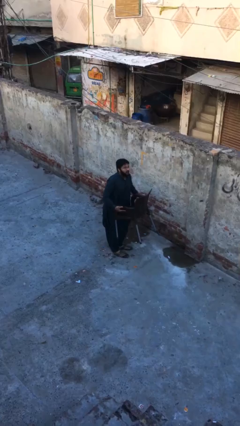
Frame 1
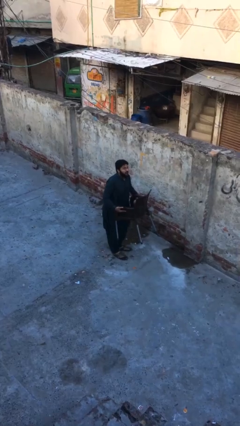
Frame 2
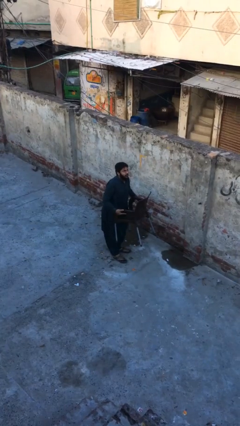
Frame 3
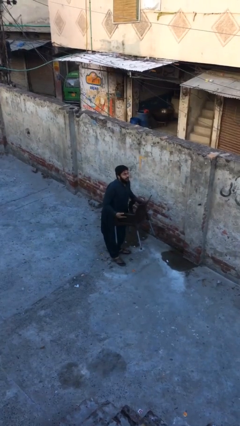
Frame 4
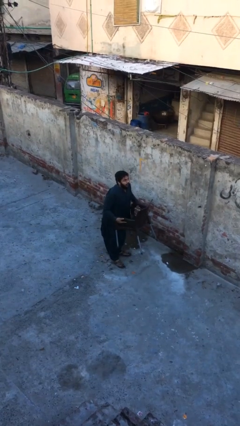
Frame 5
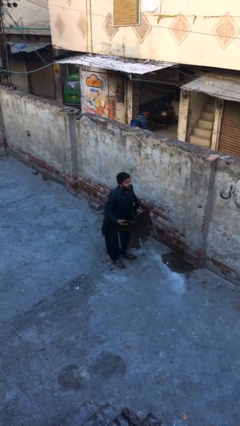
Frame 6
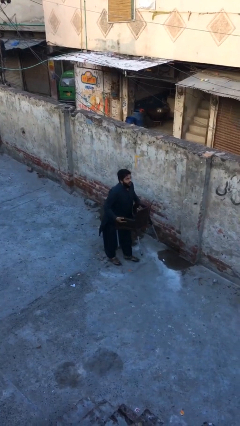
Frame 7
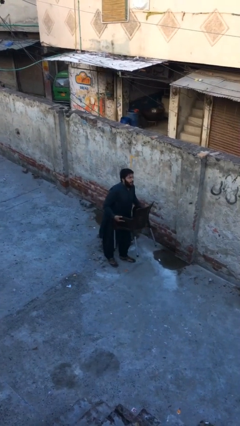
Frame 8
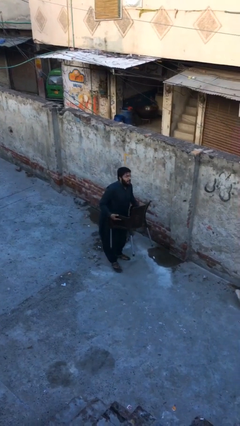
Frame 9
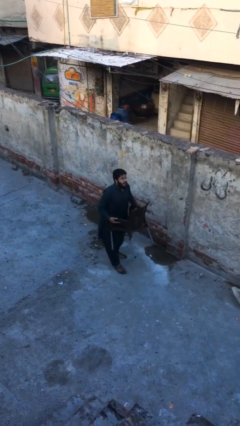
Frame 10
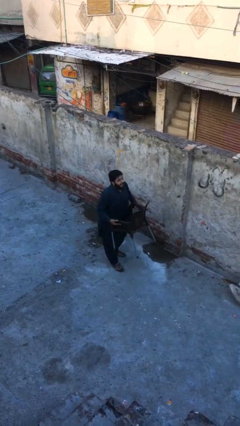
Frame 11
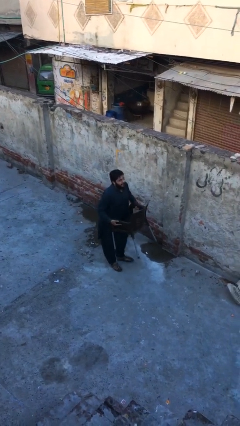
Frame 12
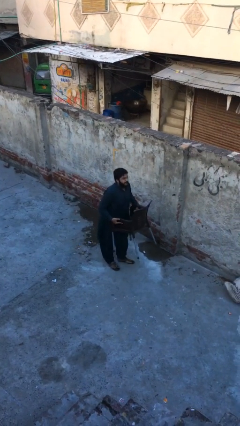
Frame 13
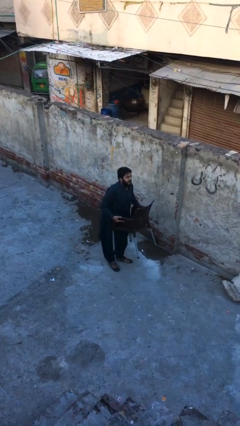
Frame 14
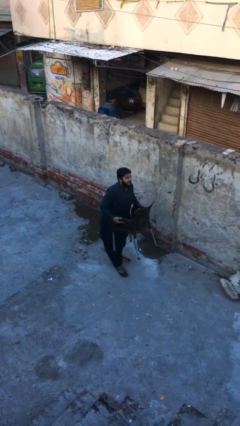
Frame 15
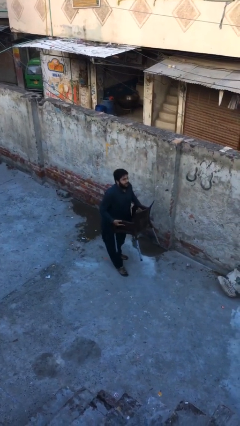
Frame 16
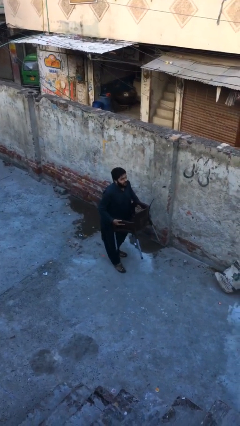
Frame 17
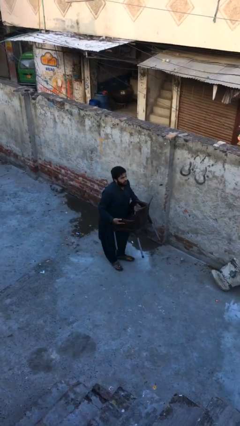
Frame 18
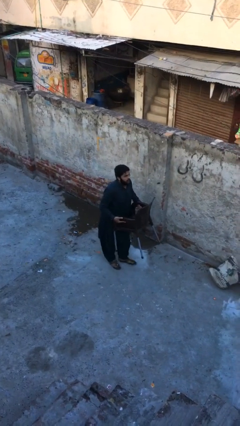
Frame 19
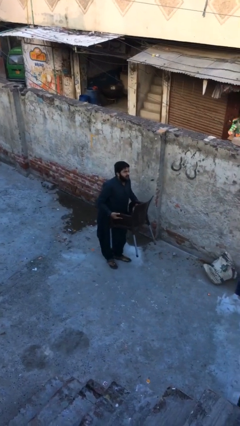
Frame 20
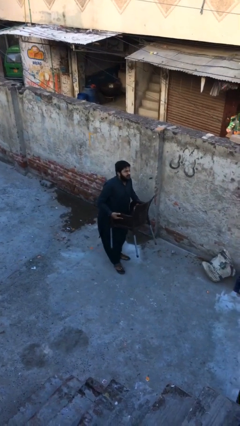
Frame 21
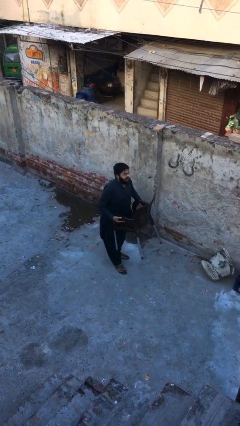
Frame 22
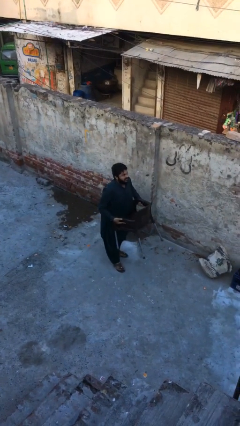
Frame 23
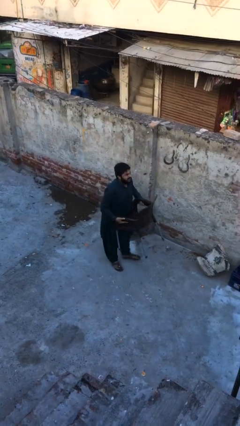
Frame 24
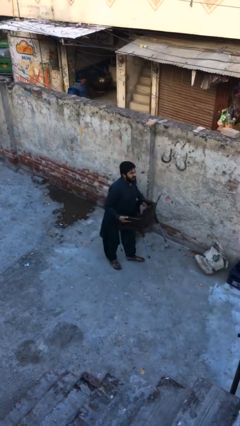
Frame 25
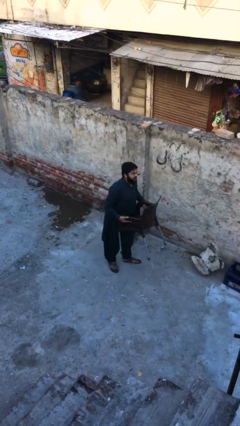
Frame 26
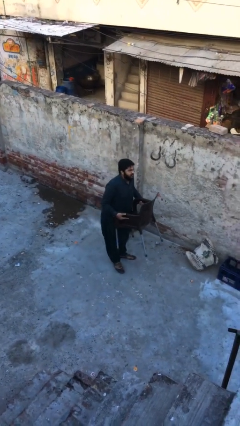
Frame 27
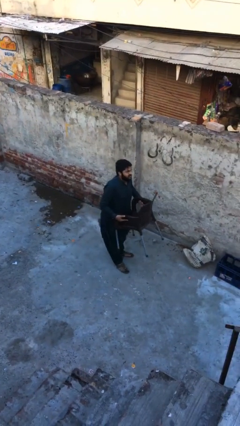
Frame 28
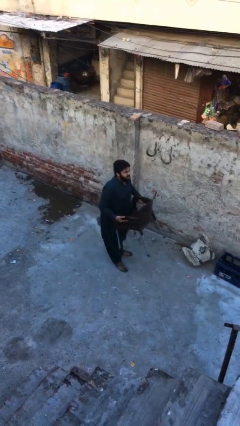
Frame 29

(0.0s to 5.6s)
person carries heavy object

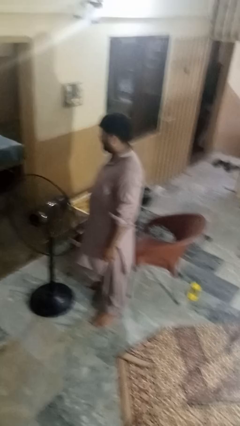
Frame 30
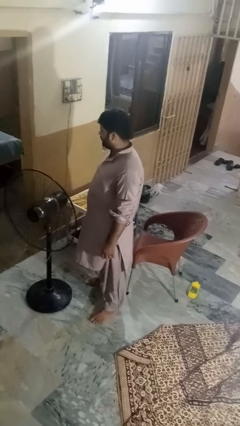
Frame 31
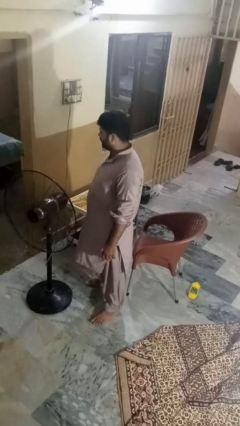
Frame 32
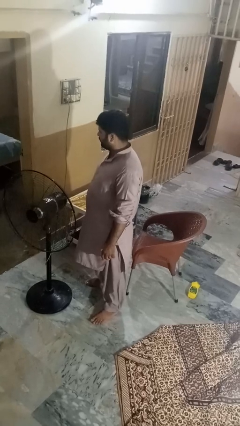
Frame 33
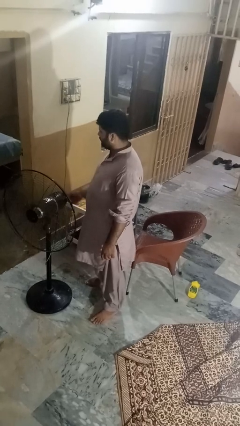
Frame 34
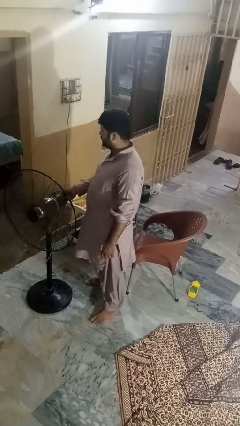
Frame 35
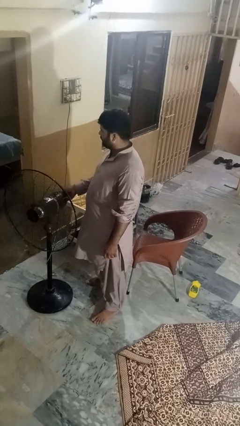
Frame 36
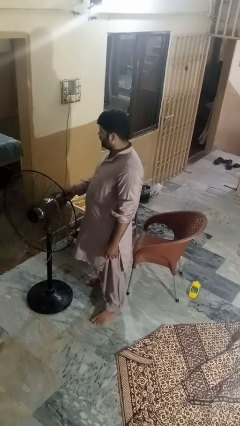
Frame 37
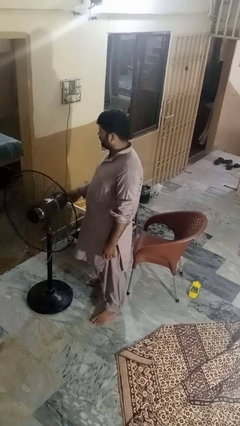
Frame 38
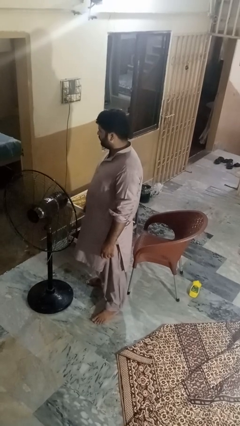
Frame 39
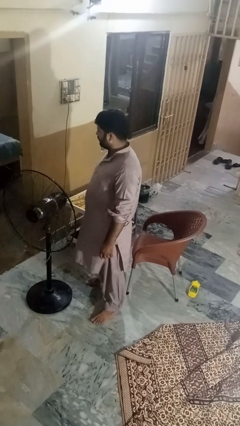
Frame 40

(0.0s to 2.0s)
person turns off fan

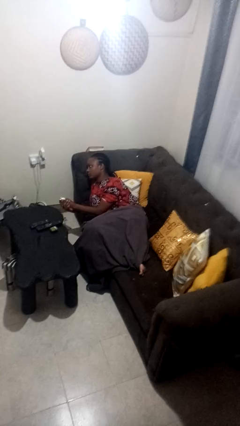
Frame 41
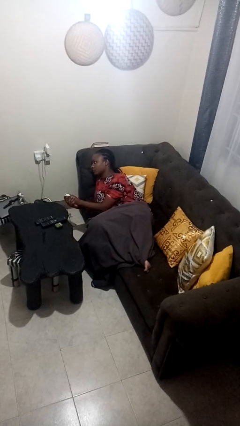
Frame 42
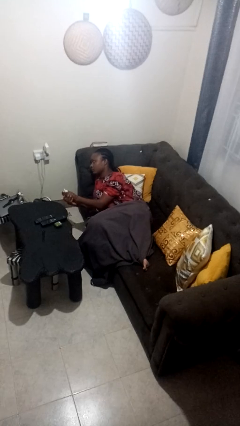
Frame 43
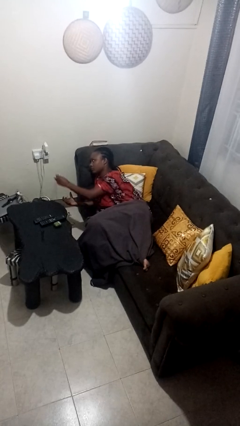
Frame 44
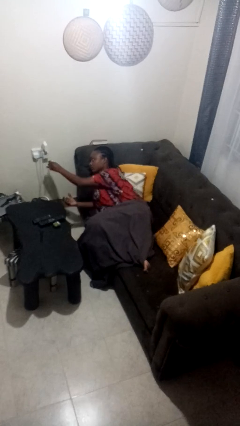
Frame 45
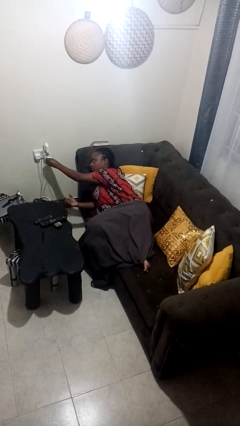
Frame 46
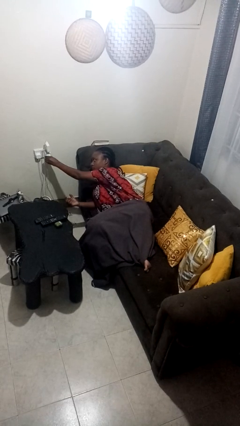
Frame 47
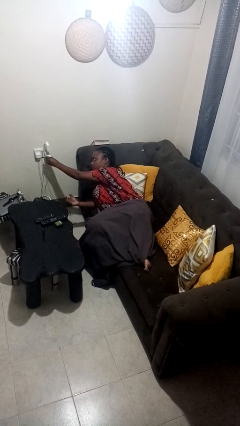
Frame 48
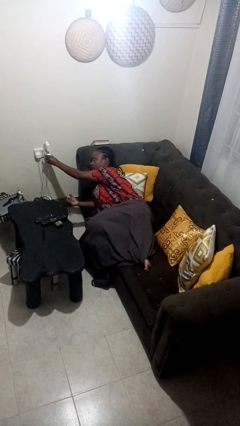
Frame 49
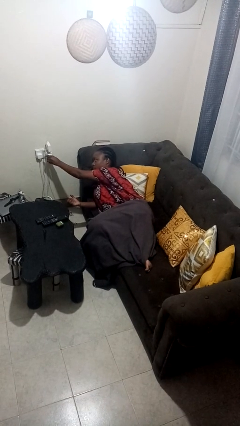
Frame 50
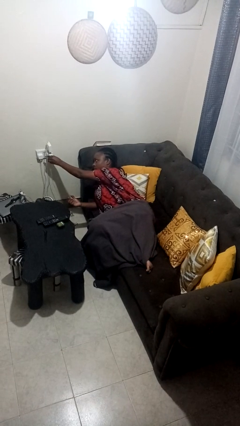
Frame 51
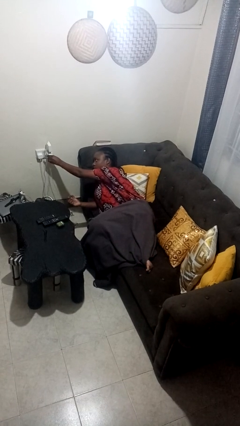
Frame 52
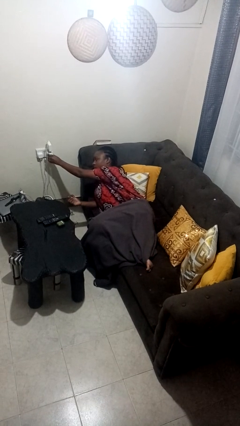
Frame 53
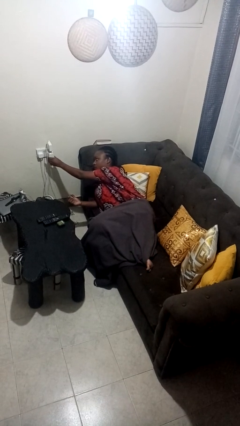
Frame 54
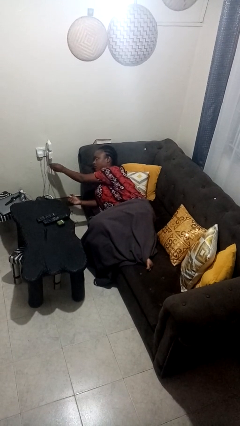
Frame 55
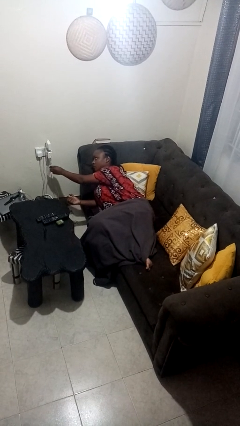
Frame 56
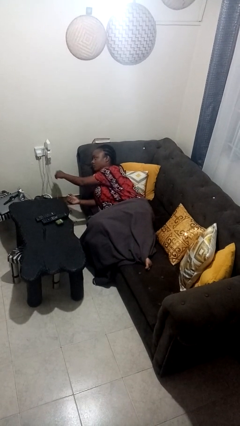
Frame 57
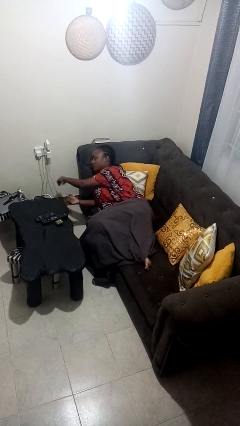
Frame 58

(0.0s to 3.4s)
person plugs into electrical socket

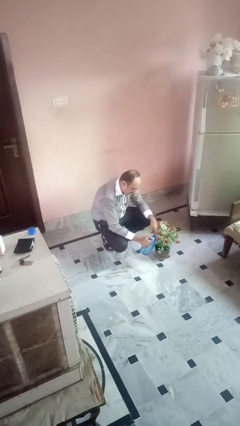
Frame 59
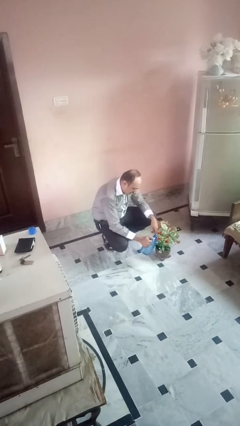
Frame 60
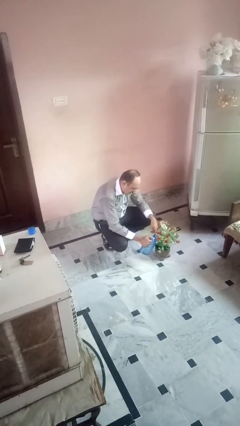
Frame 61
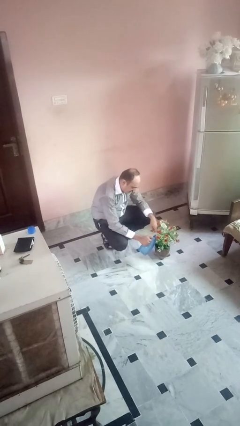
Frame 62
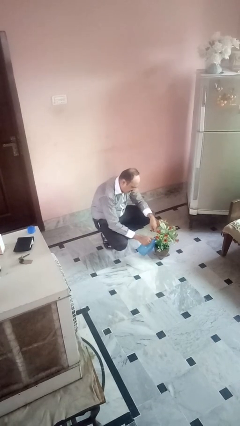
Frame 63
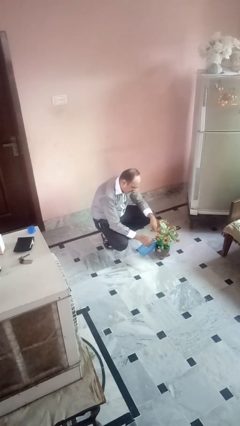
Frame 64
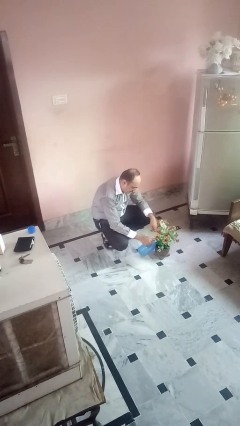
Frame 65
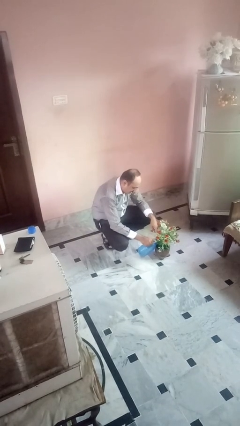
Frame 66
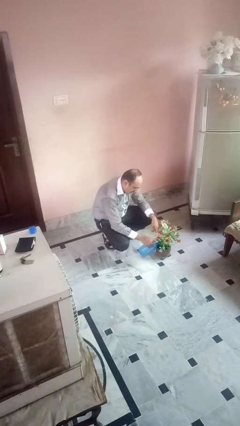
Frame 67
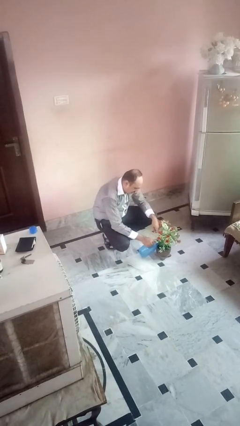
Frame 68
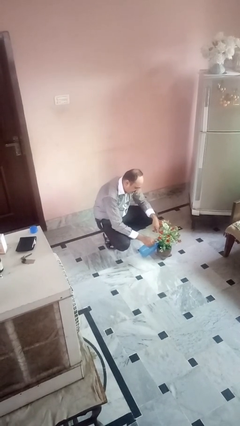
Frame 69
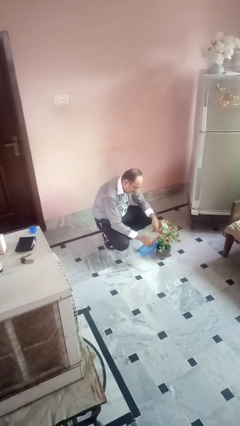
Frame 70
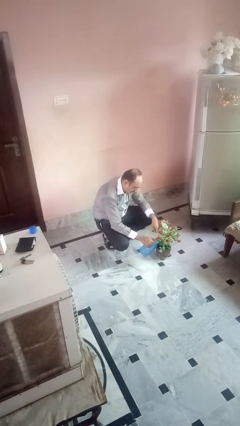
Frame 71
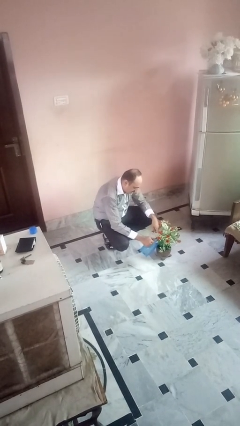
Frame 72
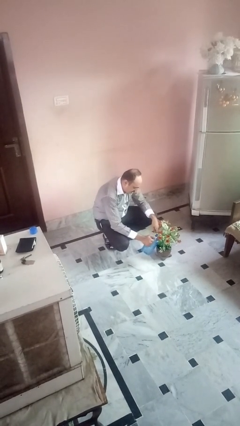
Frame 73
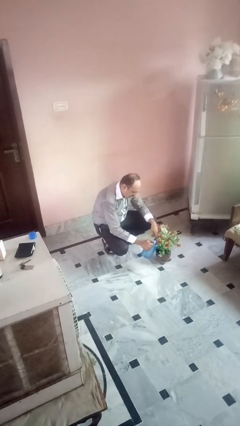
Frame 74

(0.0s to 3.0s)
person waters houseplant

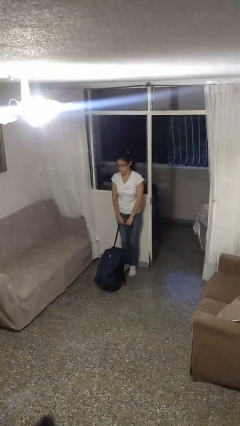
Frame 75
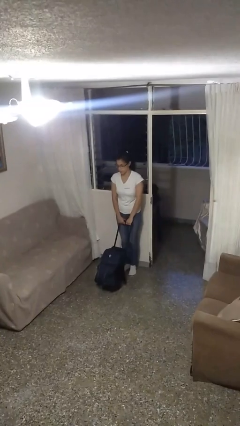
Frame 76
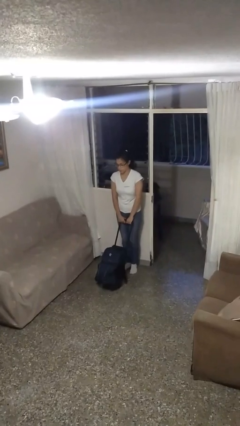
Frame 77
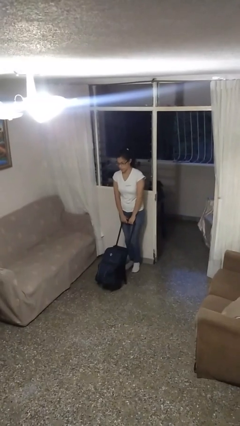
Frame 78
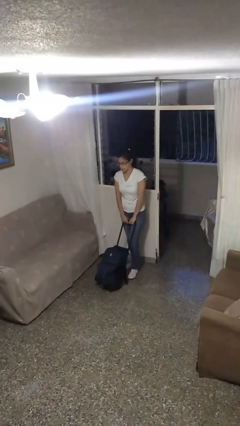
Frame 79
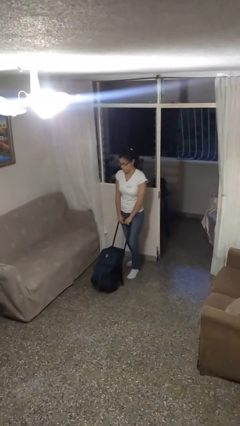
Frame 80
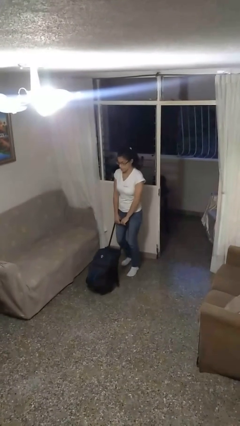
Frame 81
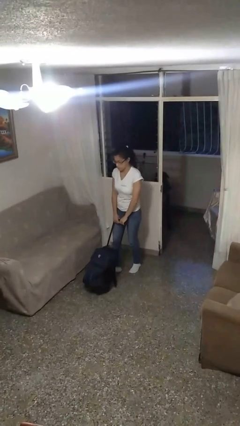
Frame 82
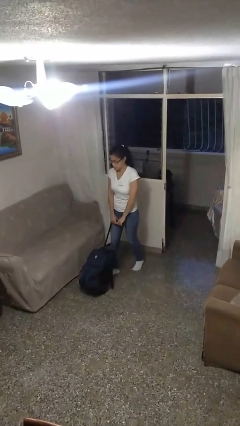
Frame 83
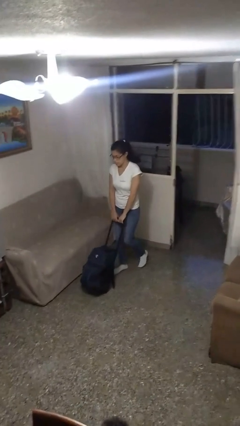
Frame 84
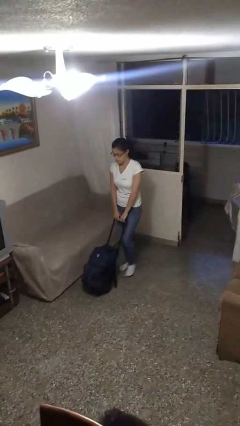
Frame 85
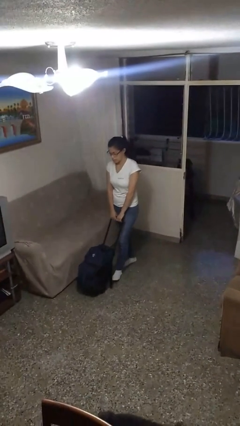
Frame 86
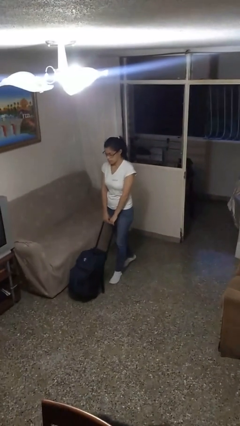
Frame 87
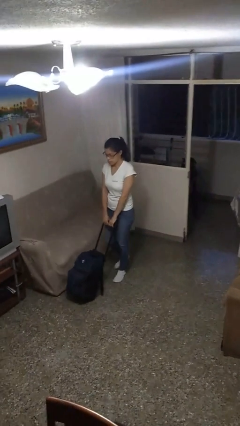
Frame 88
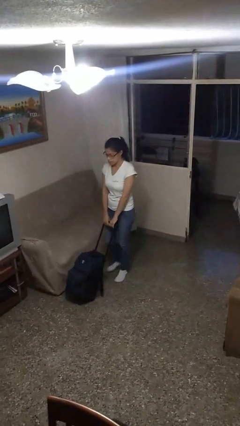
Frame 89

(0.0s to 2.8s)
person pushes wheeled cart

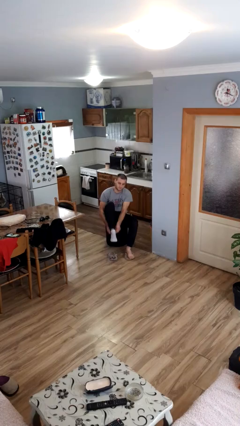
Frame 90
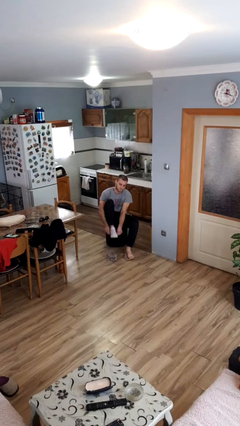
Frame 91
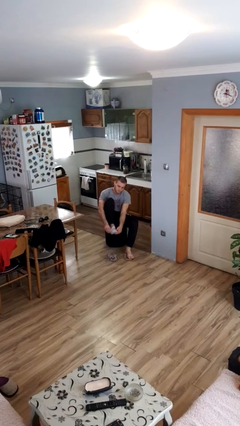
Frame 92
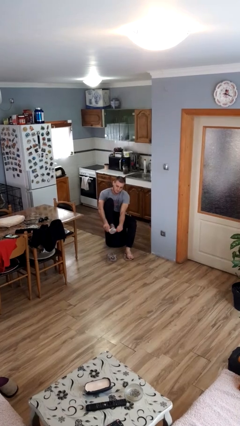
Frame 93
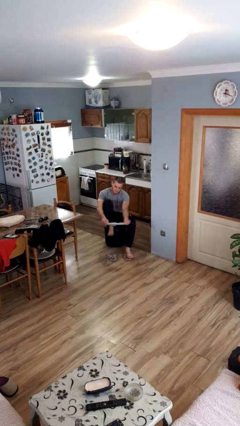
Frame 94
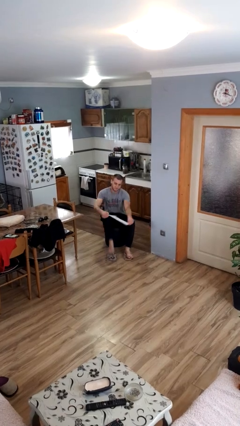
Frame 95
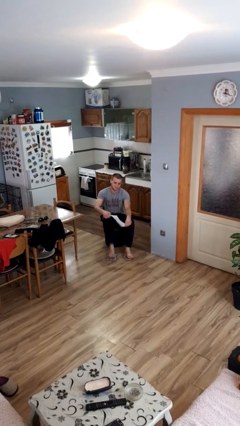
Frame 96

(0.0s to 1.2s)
person takes off socks
